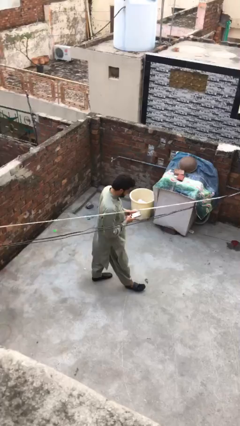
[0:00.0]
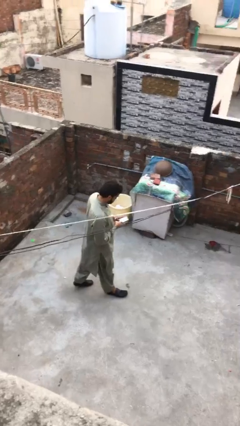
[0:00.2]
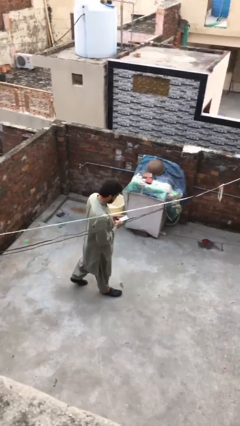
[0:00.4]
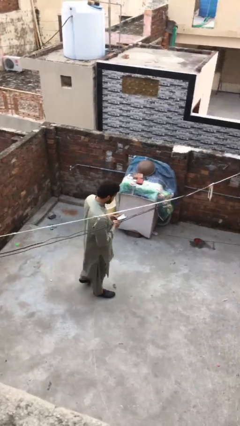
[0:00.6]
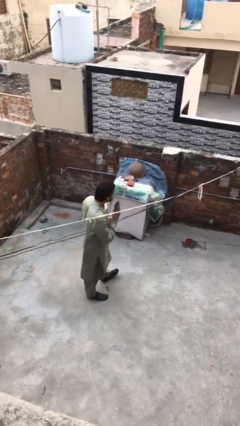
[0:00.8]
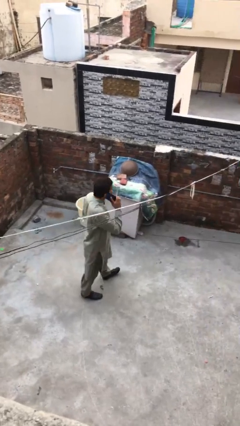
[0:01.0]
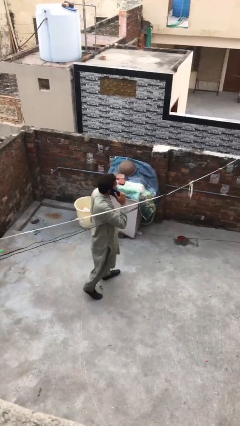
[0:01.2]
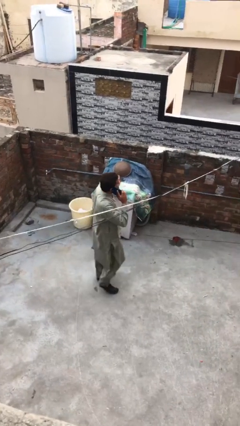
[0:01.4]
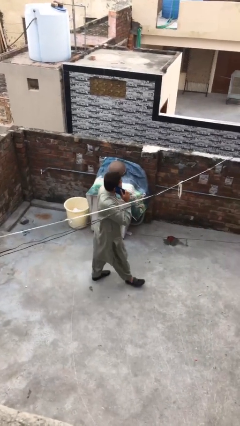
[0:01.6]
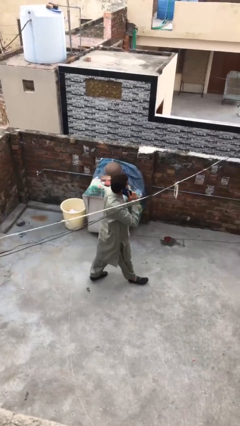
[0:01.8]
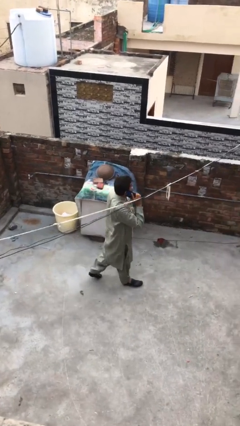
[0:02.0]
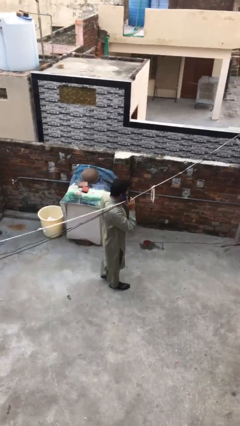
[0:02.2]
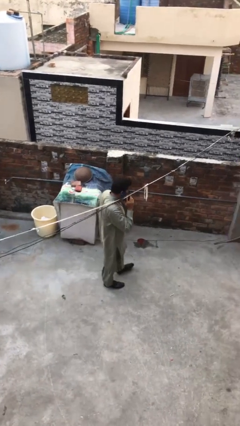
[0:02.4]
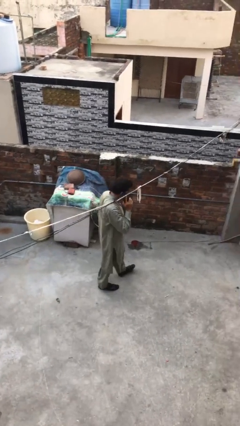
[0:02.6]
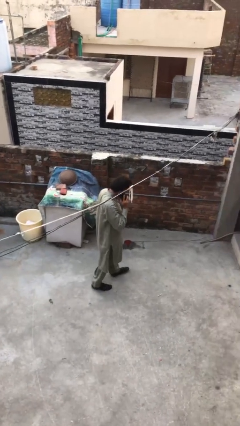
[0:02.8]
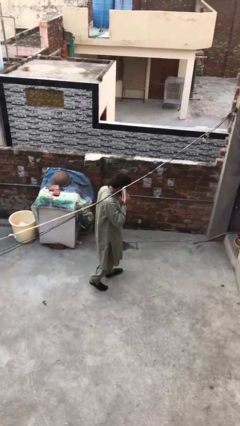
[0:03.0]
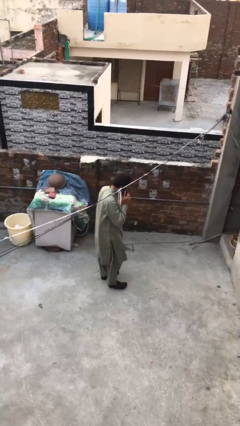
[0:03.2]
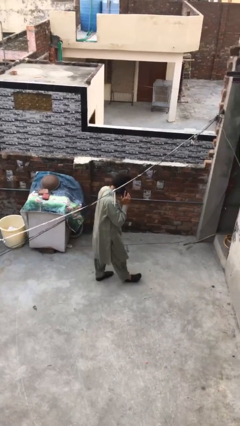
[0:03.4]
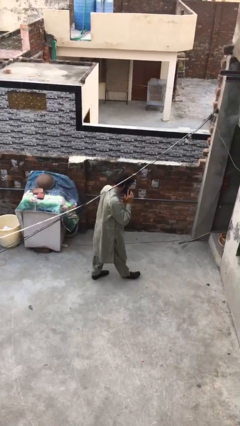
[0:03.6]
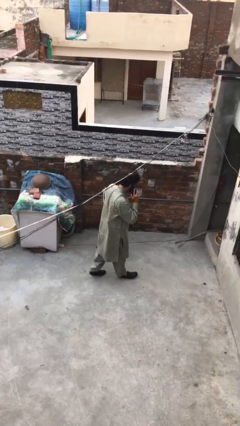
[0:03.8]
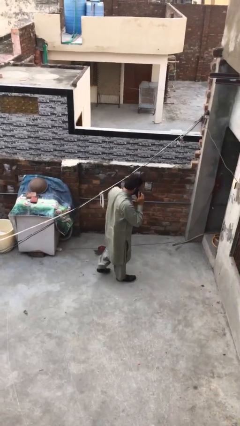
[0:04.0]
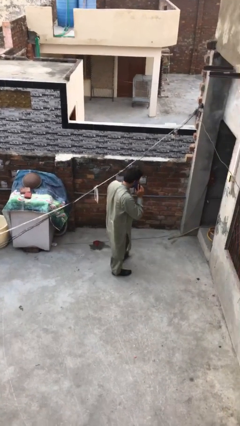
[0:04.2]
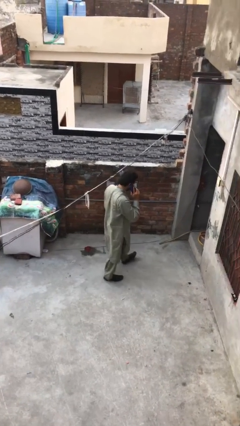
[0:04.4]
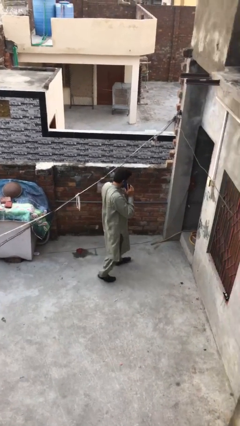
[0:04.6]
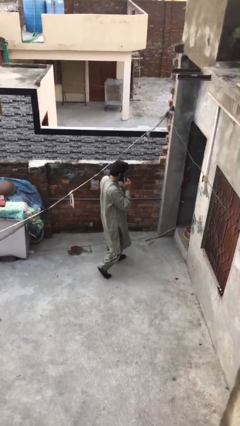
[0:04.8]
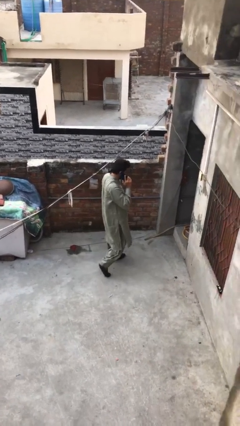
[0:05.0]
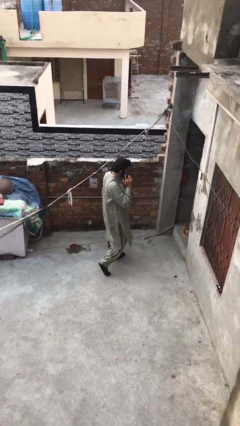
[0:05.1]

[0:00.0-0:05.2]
person talks on phone

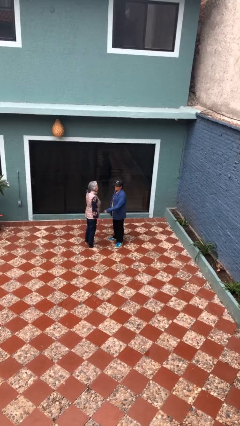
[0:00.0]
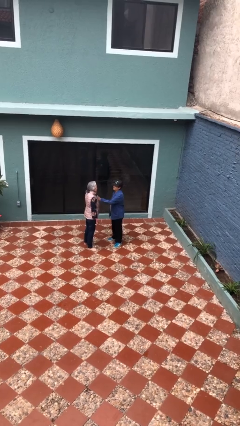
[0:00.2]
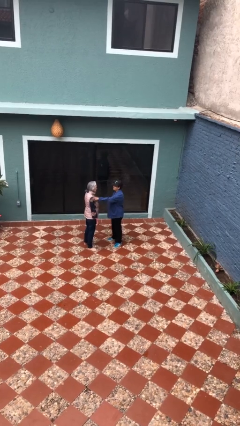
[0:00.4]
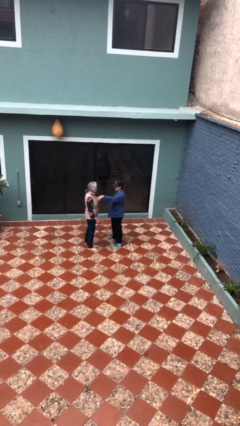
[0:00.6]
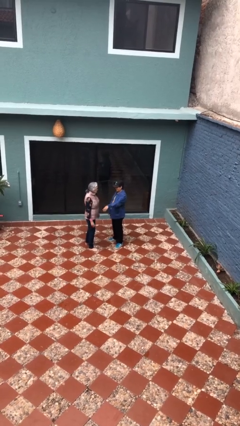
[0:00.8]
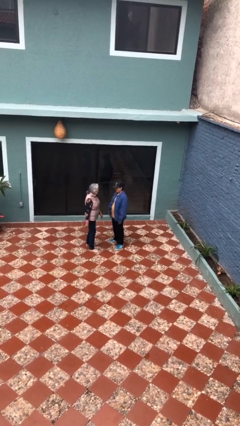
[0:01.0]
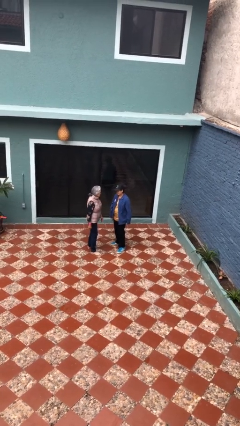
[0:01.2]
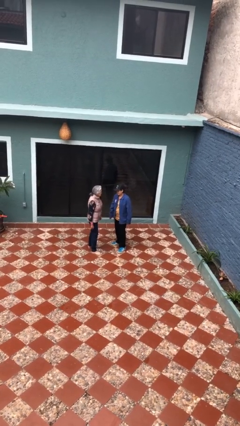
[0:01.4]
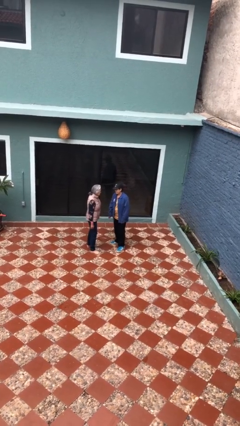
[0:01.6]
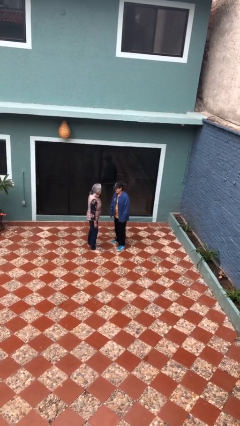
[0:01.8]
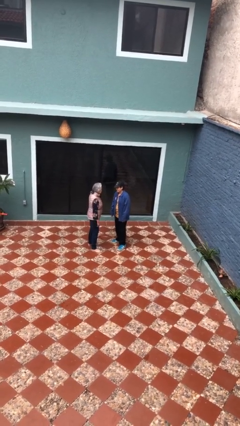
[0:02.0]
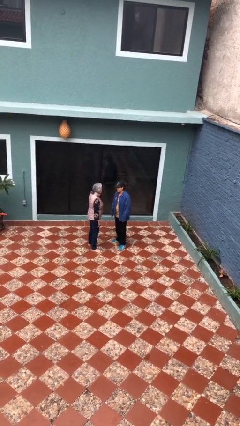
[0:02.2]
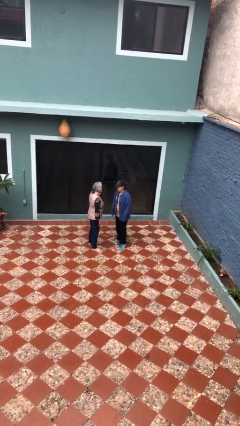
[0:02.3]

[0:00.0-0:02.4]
person shoves person

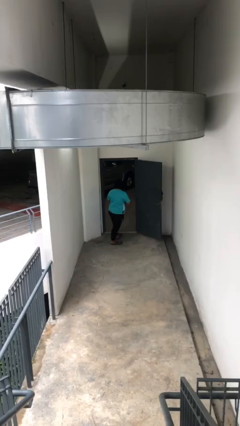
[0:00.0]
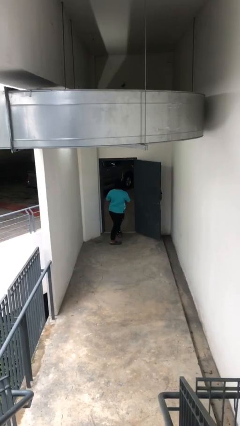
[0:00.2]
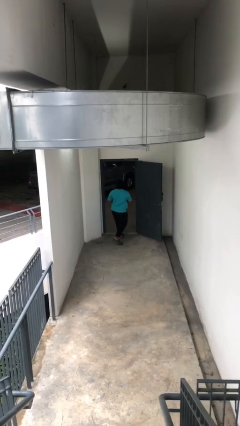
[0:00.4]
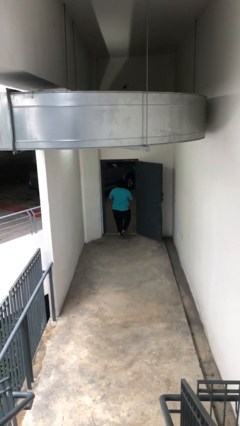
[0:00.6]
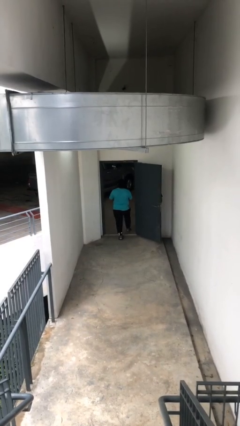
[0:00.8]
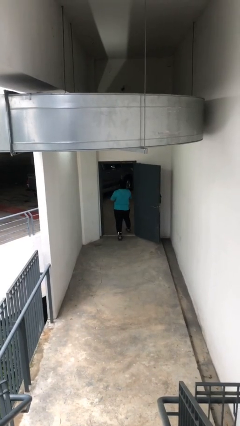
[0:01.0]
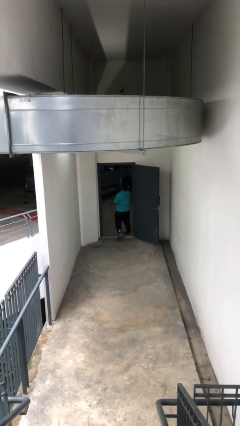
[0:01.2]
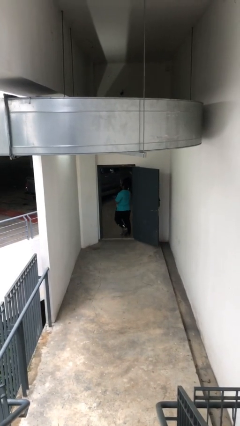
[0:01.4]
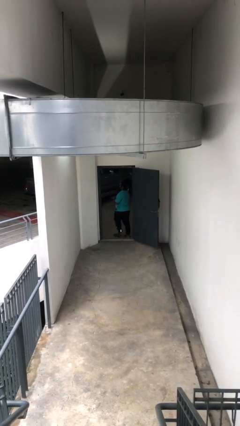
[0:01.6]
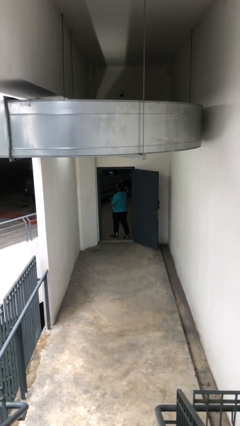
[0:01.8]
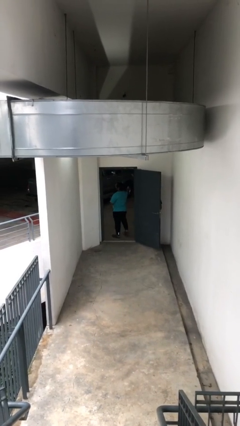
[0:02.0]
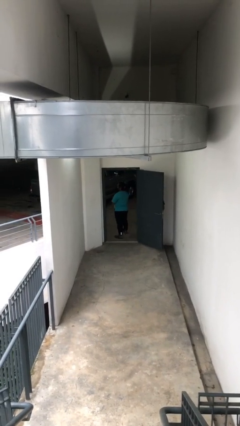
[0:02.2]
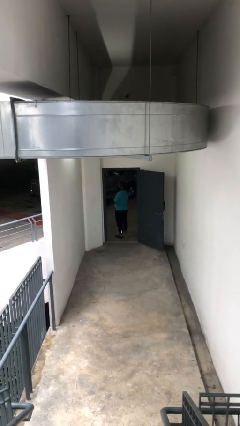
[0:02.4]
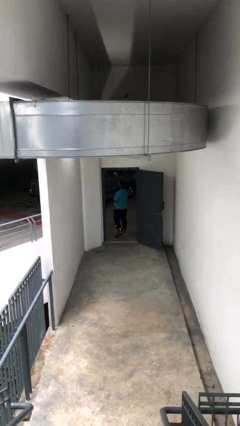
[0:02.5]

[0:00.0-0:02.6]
person exits scene through structure

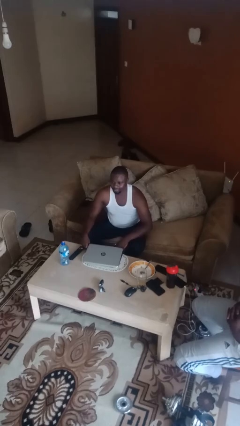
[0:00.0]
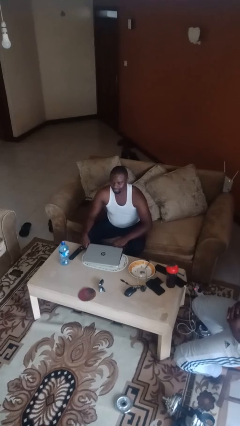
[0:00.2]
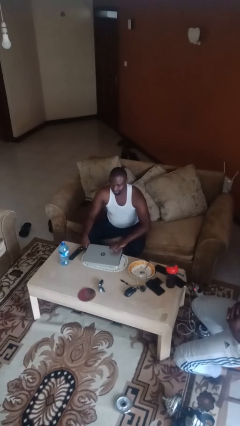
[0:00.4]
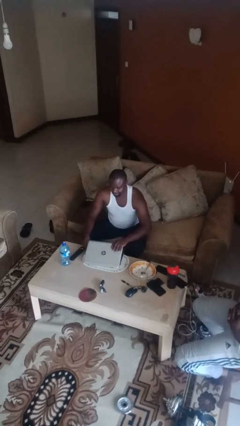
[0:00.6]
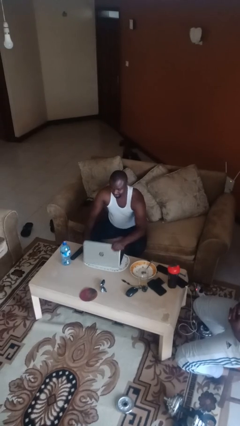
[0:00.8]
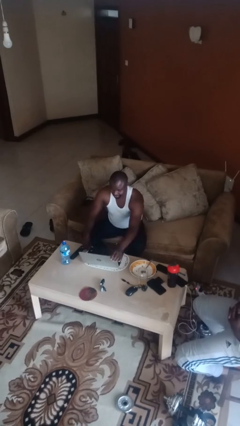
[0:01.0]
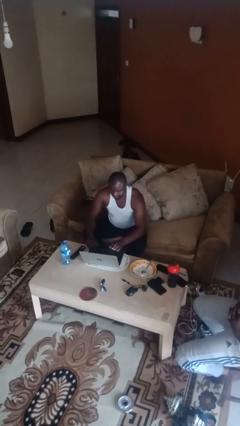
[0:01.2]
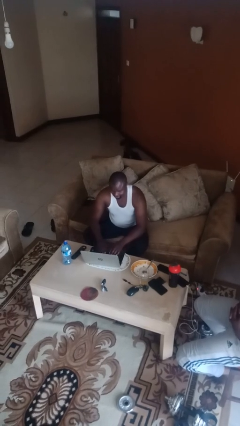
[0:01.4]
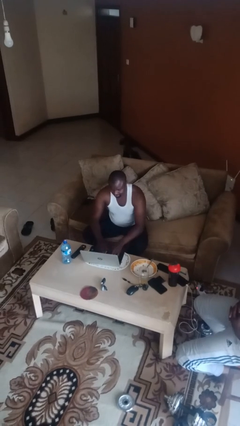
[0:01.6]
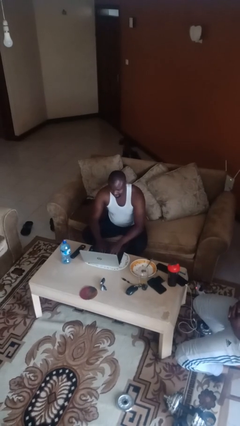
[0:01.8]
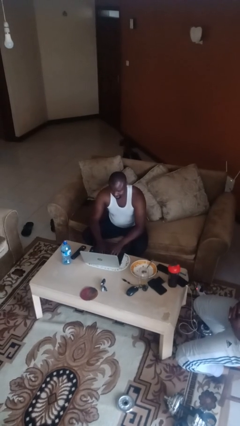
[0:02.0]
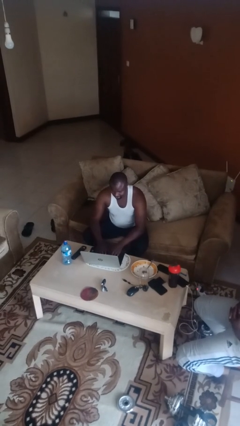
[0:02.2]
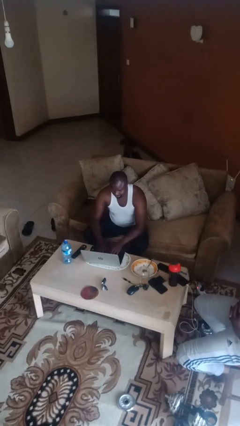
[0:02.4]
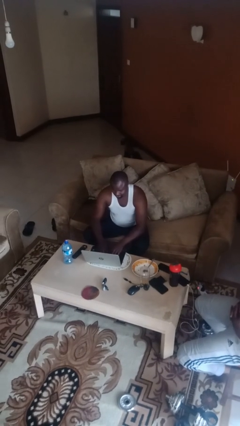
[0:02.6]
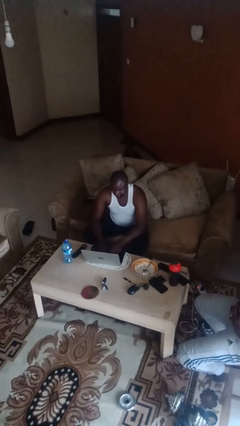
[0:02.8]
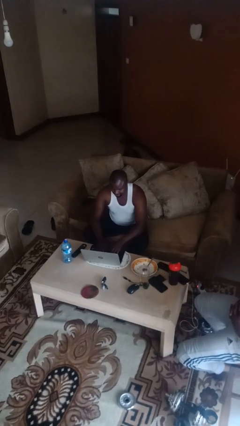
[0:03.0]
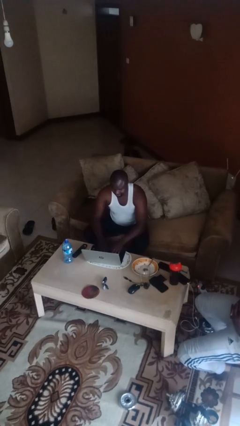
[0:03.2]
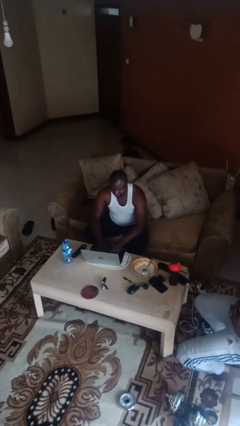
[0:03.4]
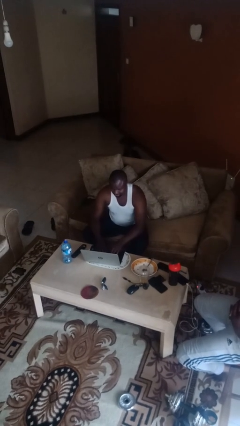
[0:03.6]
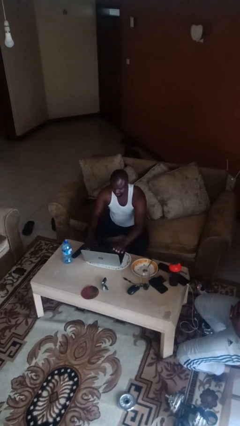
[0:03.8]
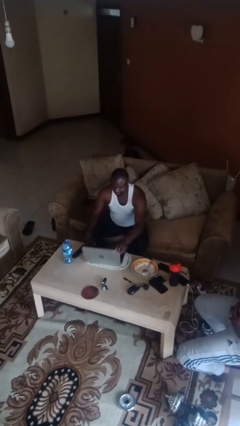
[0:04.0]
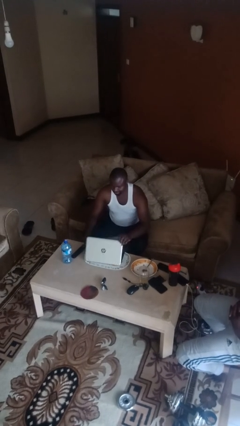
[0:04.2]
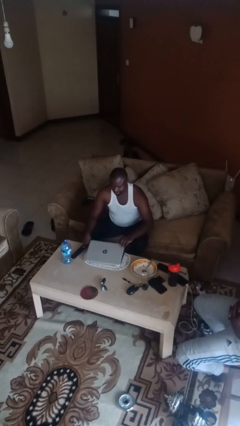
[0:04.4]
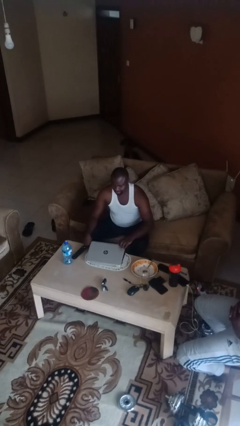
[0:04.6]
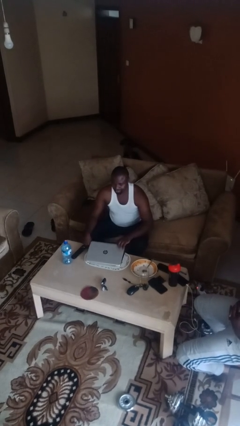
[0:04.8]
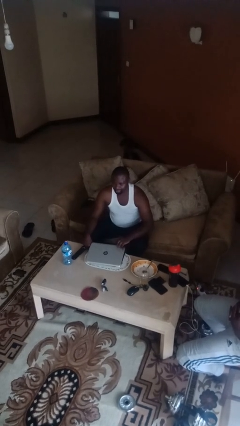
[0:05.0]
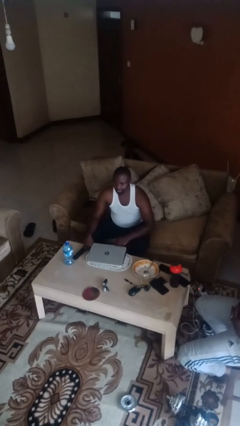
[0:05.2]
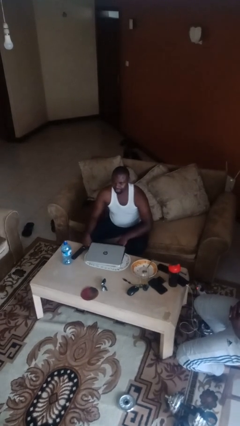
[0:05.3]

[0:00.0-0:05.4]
person interacts with laptop

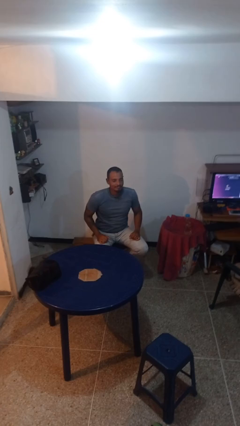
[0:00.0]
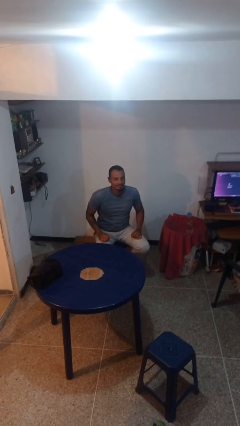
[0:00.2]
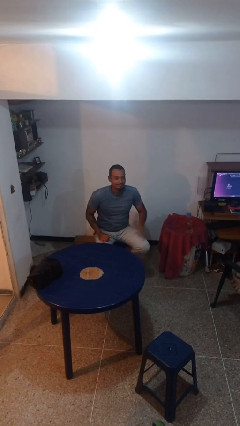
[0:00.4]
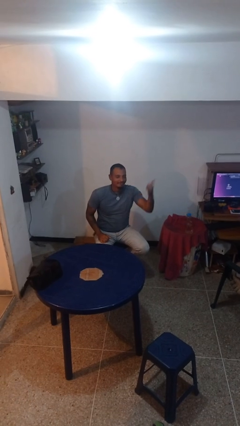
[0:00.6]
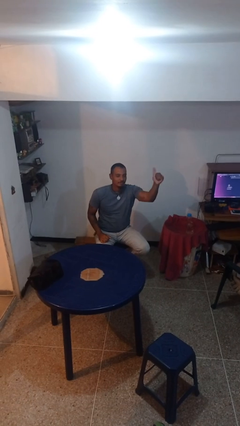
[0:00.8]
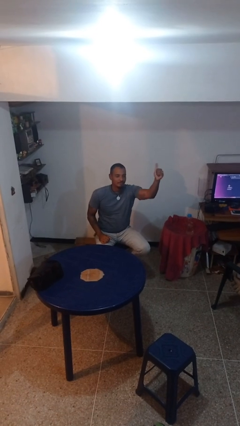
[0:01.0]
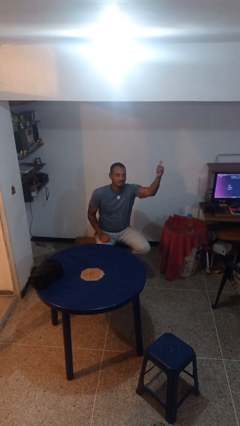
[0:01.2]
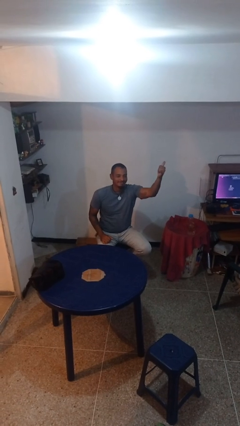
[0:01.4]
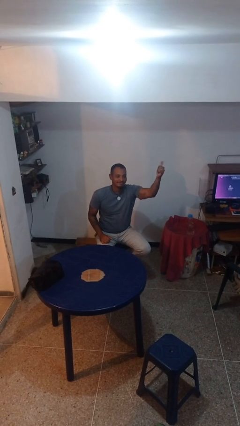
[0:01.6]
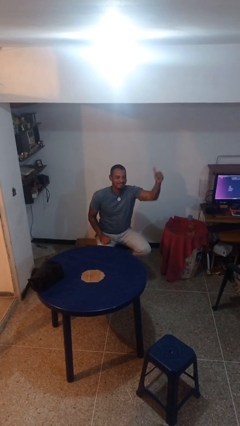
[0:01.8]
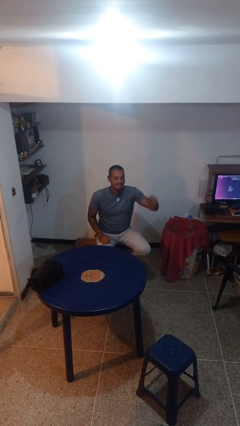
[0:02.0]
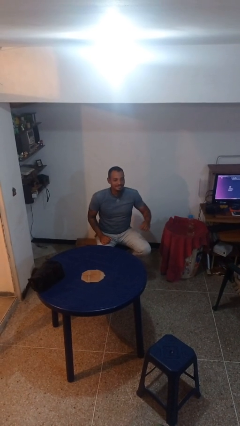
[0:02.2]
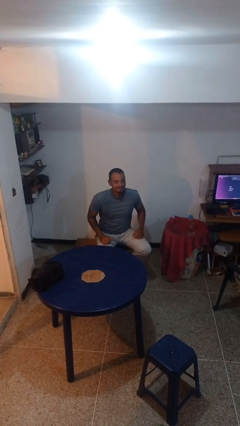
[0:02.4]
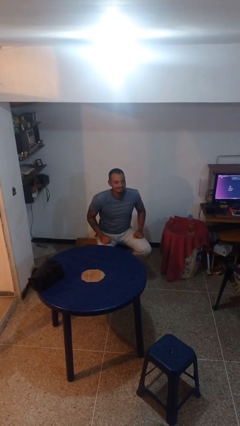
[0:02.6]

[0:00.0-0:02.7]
person gestures hang loose
